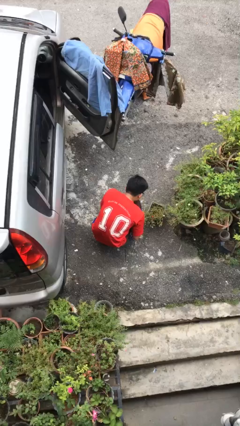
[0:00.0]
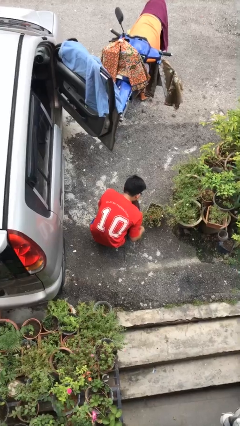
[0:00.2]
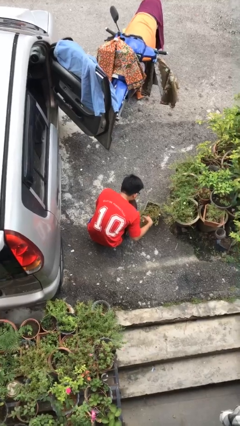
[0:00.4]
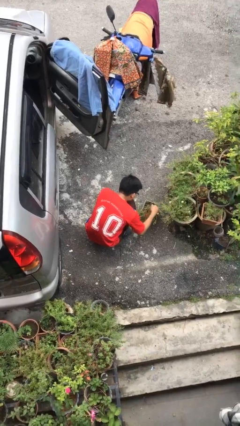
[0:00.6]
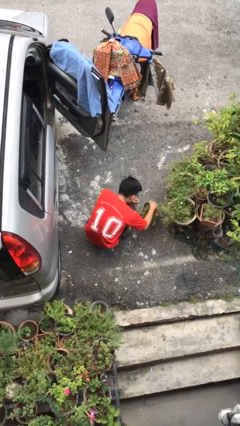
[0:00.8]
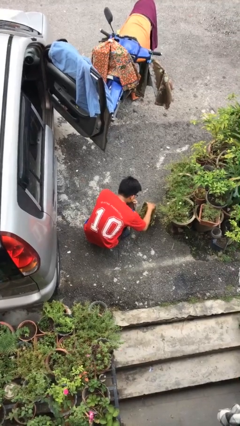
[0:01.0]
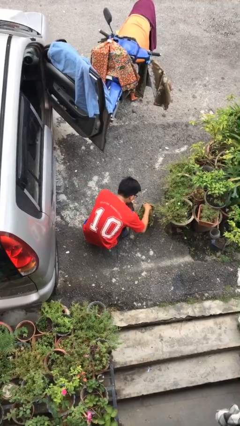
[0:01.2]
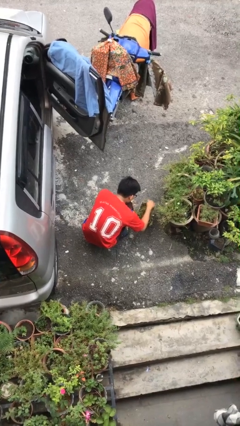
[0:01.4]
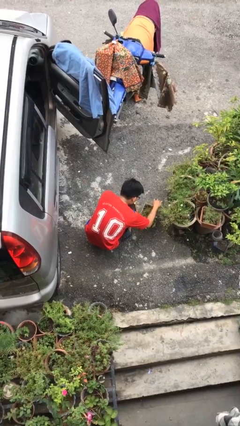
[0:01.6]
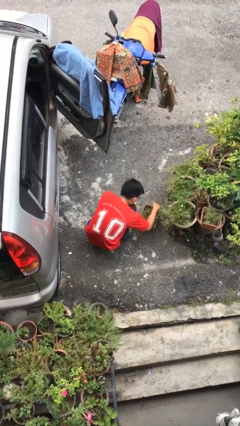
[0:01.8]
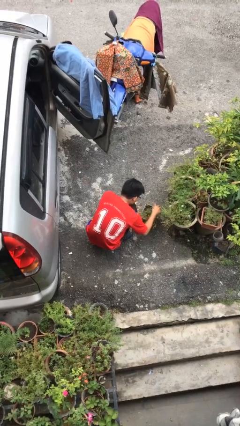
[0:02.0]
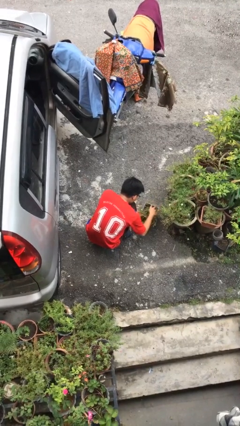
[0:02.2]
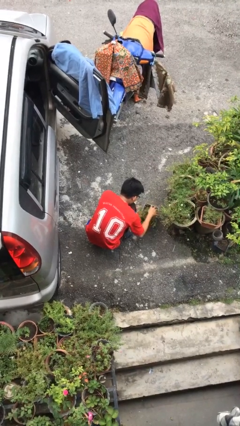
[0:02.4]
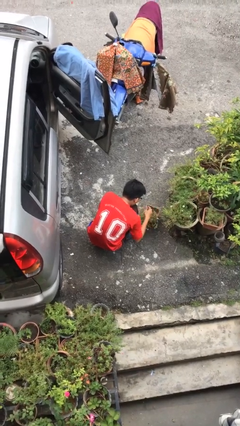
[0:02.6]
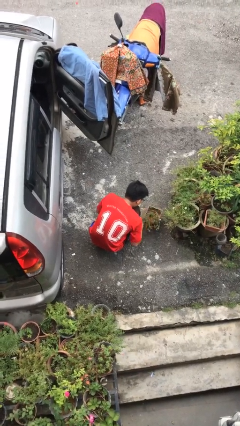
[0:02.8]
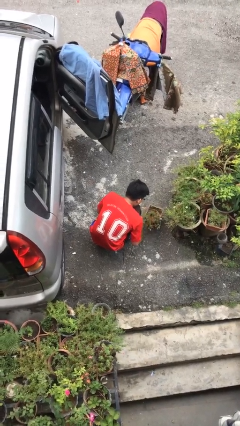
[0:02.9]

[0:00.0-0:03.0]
person arranges flowers in vase

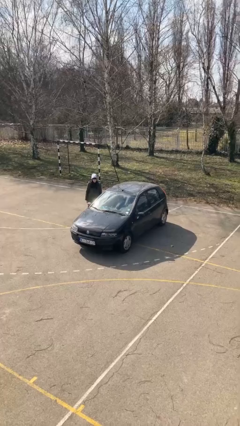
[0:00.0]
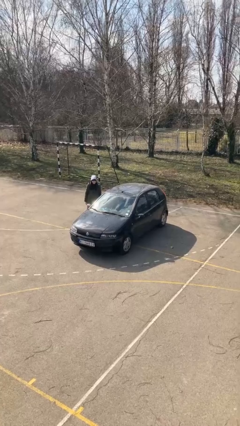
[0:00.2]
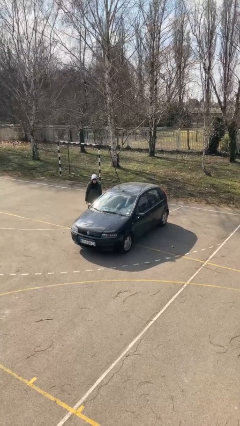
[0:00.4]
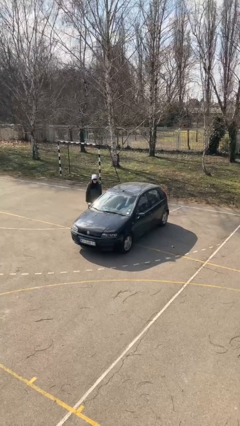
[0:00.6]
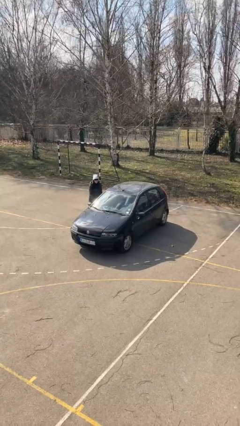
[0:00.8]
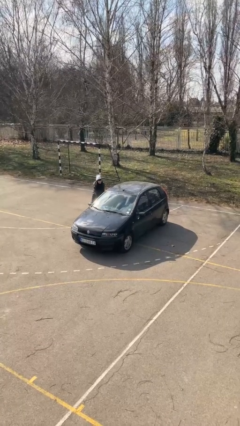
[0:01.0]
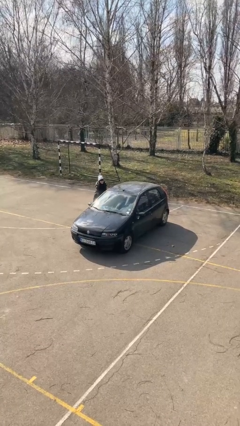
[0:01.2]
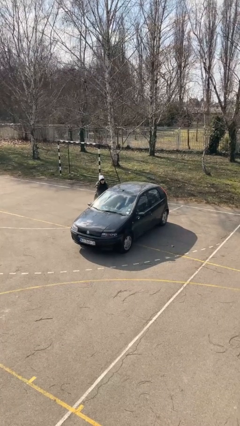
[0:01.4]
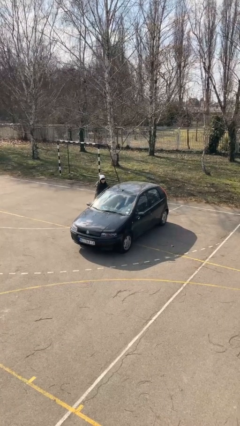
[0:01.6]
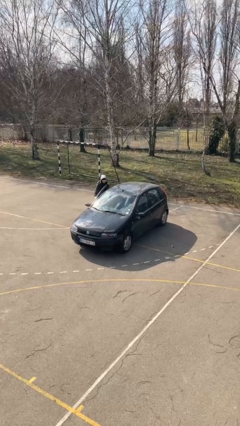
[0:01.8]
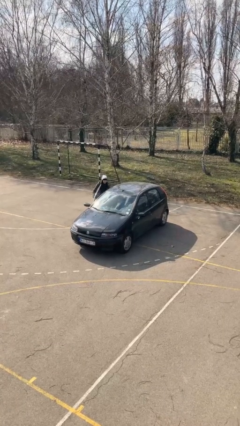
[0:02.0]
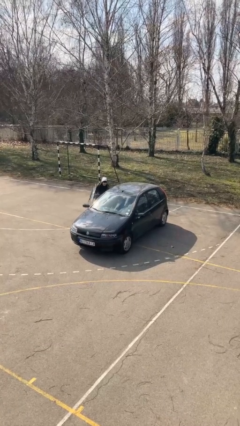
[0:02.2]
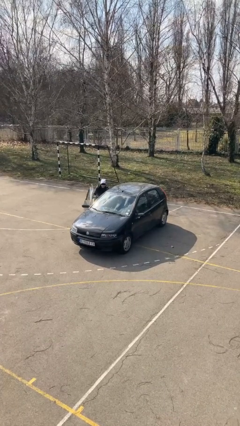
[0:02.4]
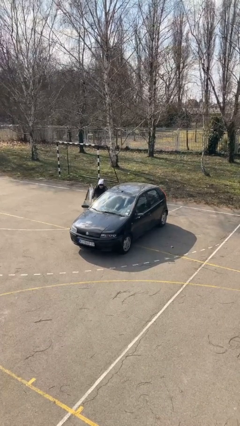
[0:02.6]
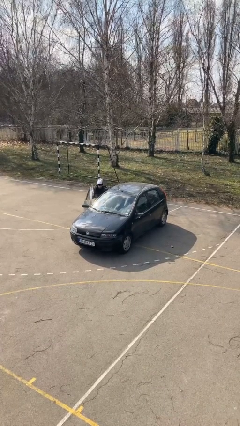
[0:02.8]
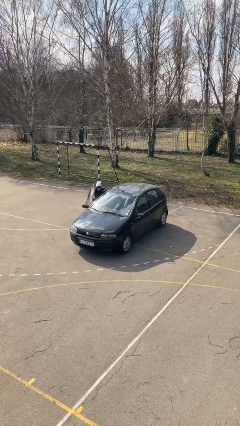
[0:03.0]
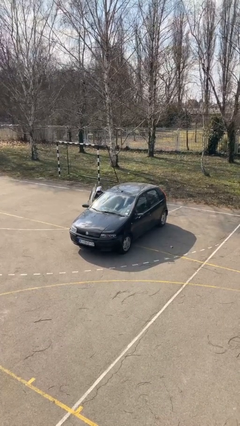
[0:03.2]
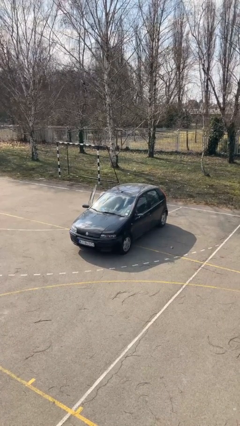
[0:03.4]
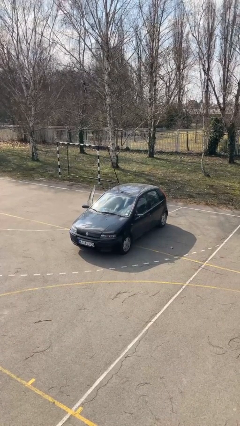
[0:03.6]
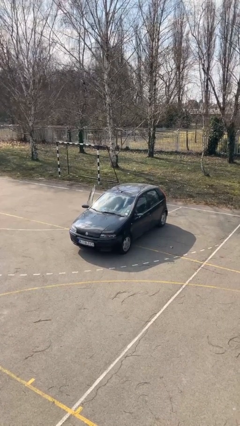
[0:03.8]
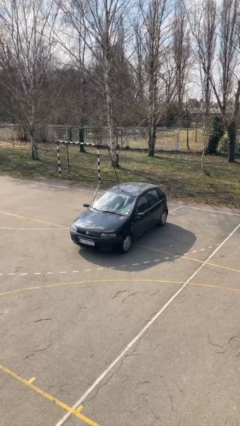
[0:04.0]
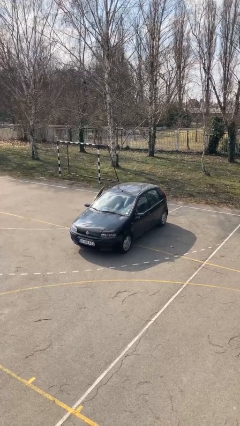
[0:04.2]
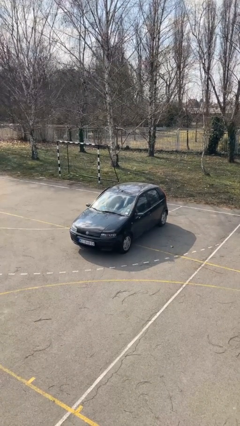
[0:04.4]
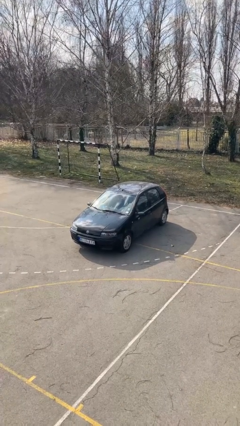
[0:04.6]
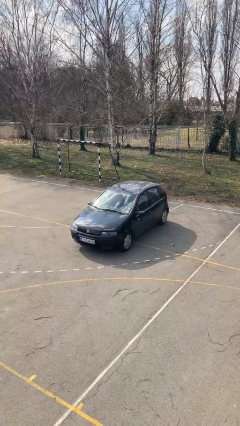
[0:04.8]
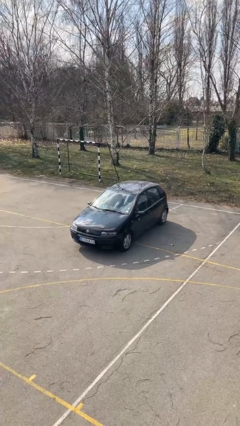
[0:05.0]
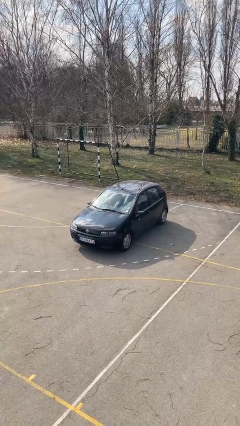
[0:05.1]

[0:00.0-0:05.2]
car picks up person

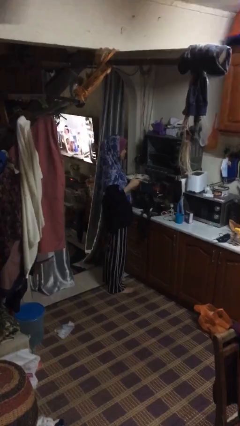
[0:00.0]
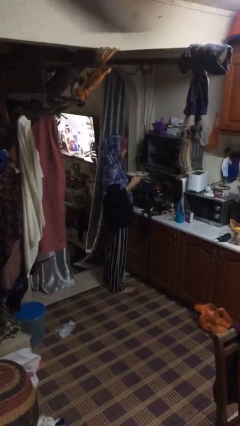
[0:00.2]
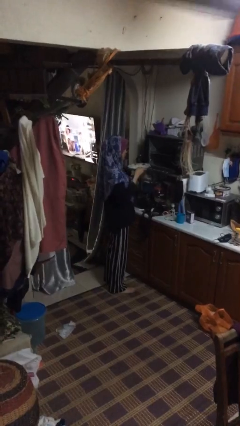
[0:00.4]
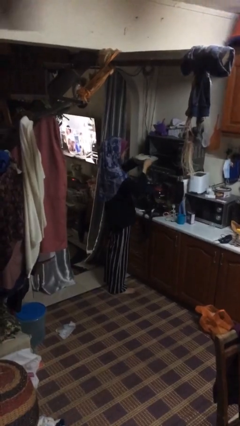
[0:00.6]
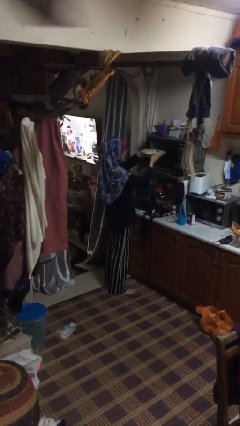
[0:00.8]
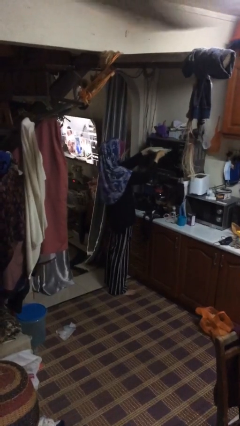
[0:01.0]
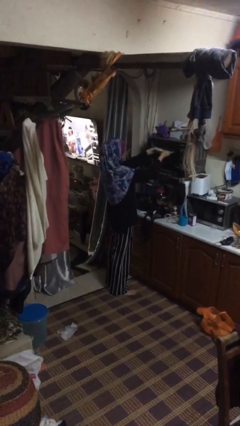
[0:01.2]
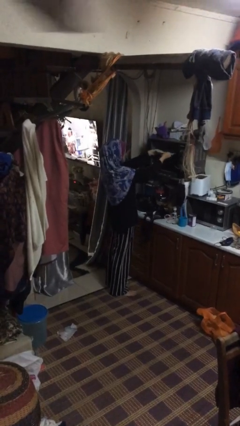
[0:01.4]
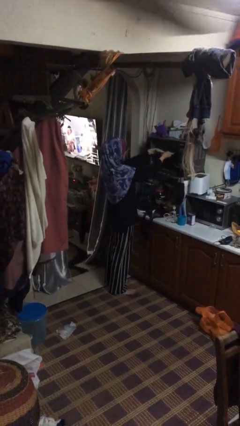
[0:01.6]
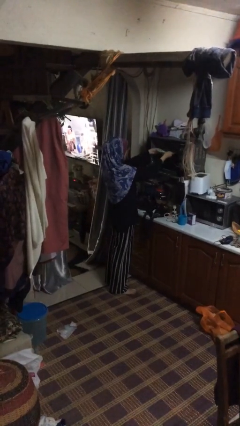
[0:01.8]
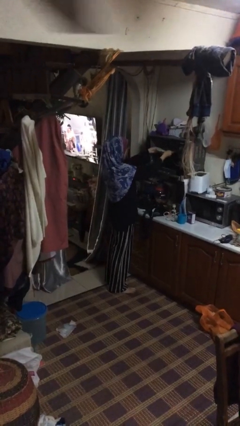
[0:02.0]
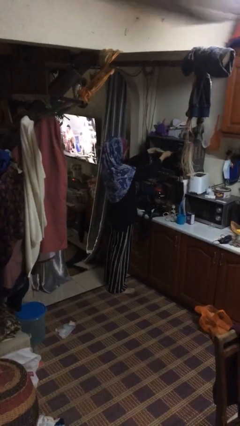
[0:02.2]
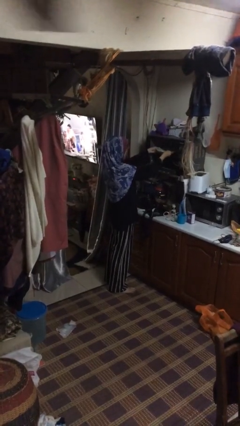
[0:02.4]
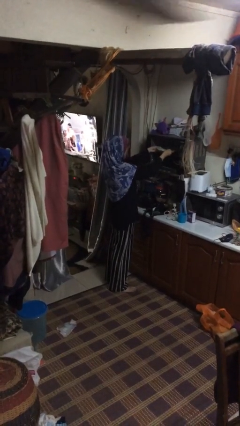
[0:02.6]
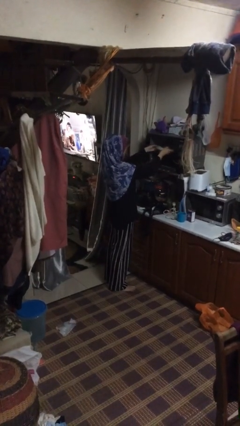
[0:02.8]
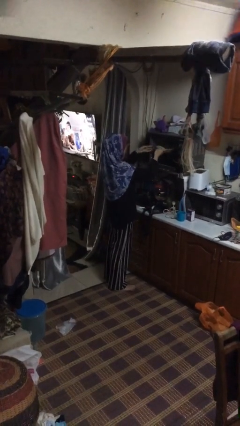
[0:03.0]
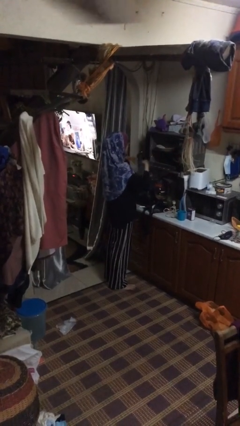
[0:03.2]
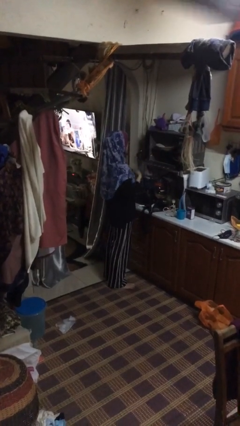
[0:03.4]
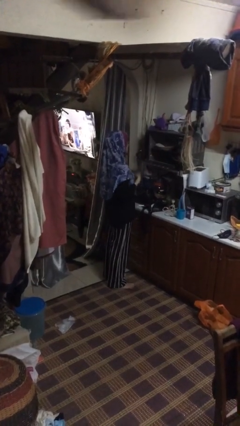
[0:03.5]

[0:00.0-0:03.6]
person puts object into oven

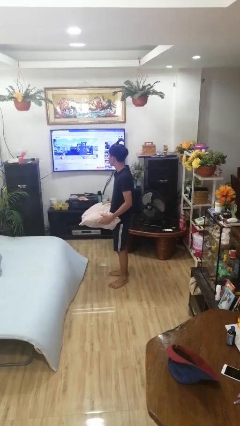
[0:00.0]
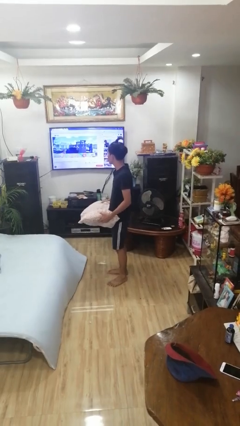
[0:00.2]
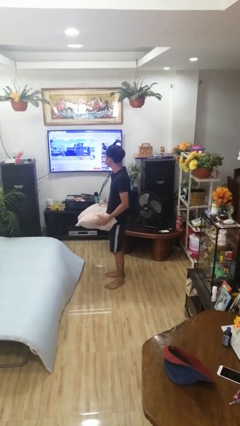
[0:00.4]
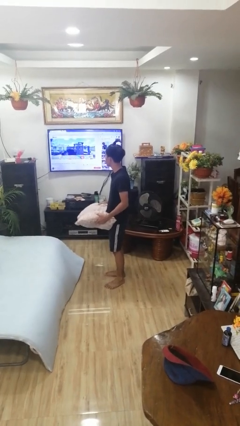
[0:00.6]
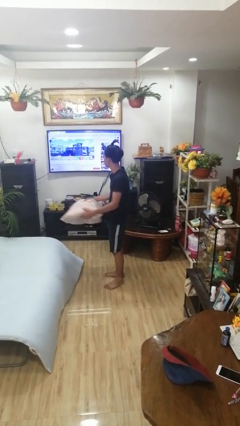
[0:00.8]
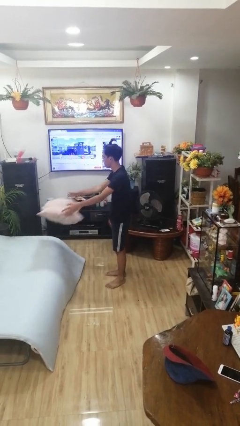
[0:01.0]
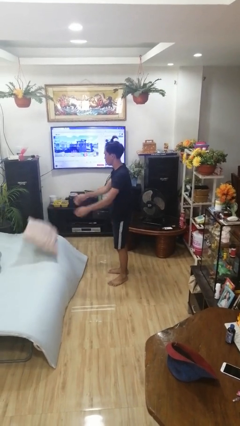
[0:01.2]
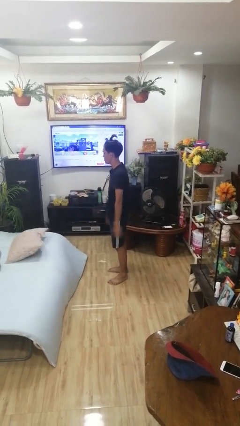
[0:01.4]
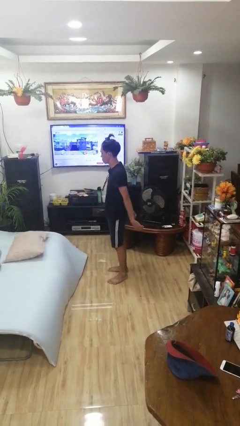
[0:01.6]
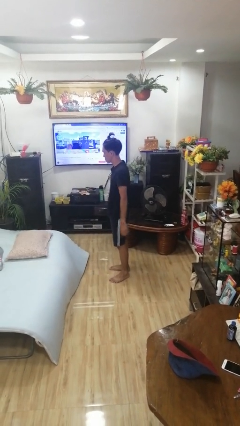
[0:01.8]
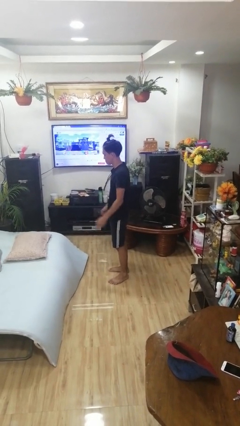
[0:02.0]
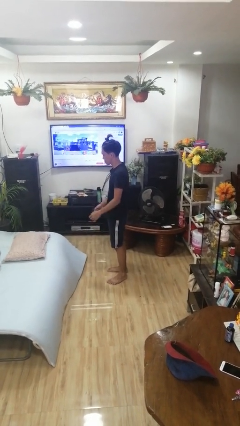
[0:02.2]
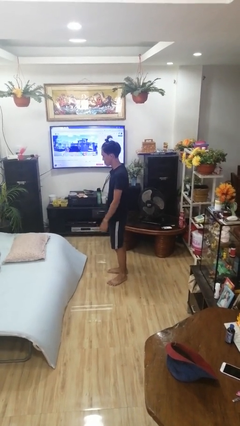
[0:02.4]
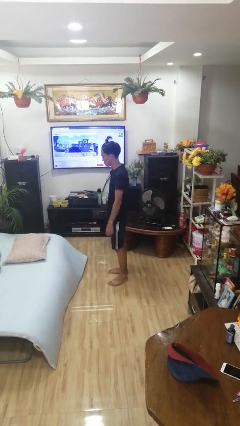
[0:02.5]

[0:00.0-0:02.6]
person throws object on bed

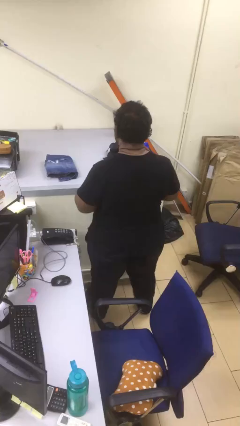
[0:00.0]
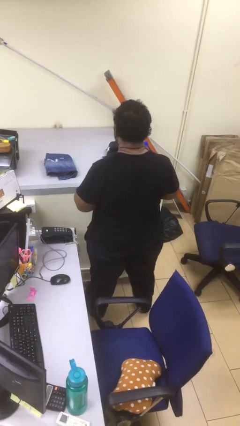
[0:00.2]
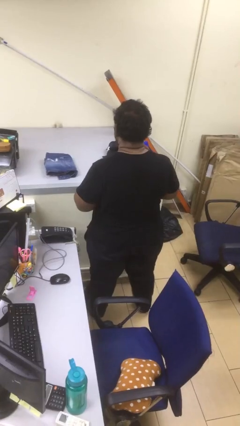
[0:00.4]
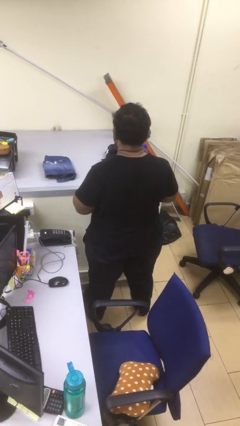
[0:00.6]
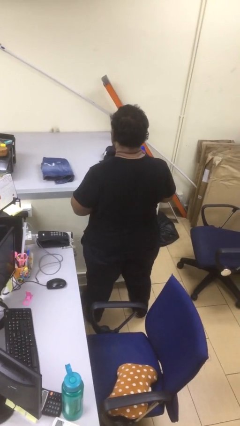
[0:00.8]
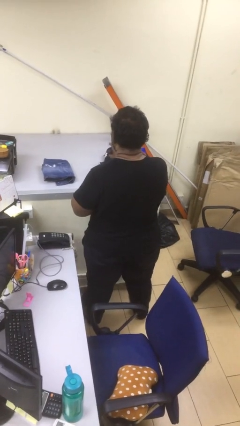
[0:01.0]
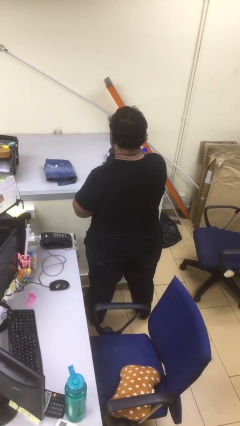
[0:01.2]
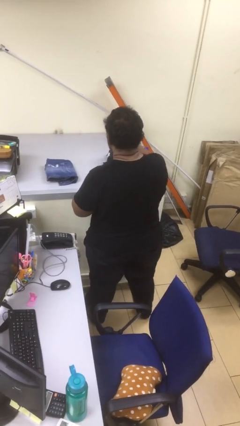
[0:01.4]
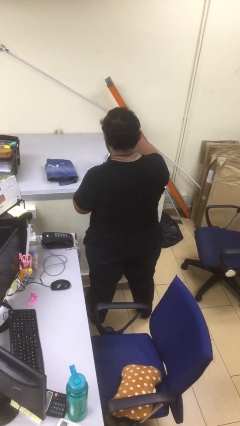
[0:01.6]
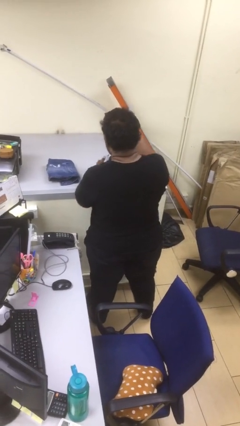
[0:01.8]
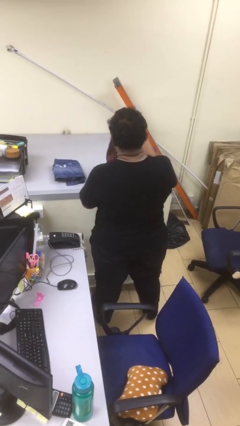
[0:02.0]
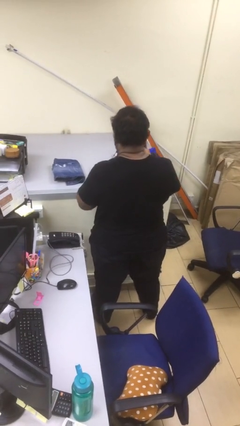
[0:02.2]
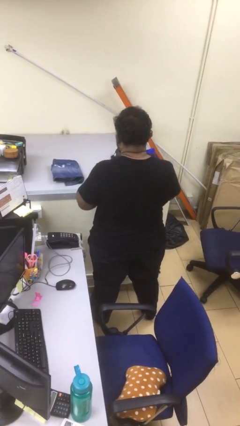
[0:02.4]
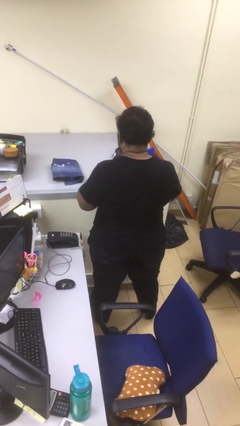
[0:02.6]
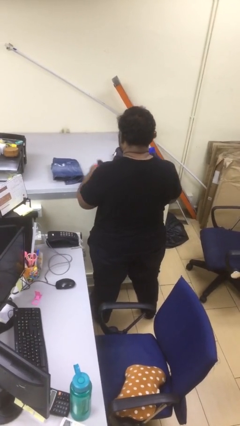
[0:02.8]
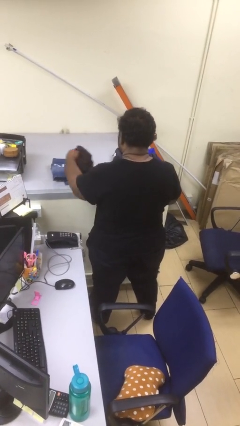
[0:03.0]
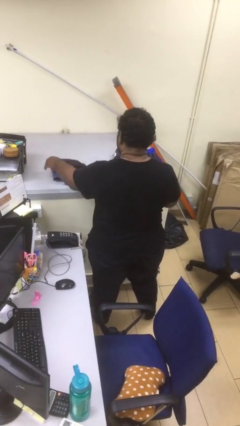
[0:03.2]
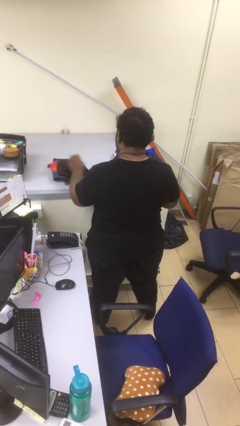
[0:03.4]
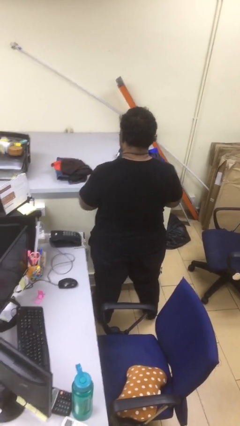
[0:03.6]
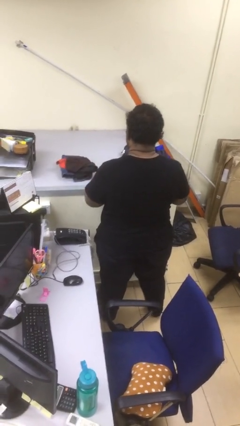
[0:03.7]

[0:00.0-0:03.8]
person folds shirt
